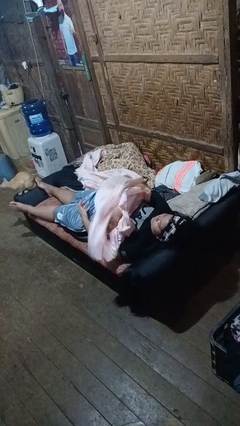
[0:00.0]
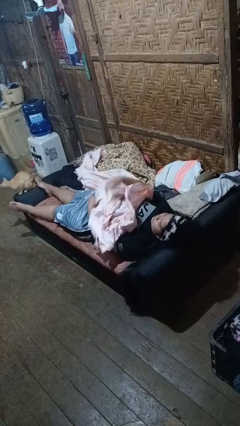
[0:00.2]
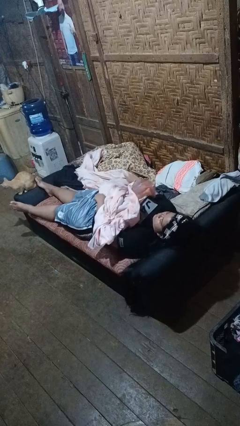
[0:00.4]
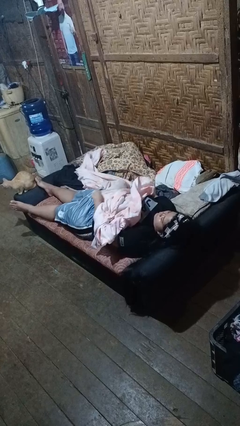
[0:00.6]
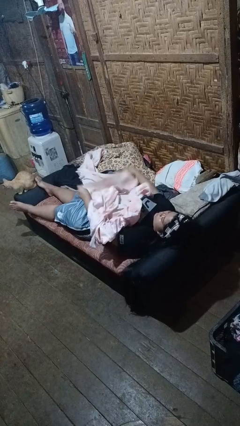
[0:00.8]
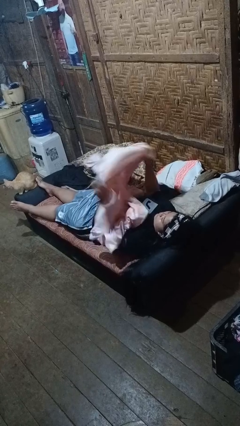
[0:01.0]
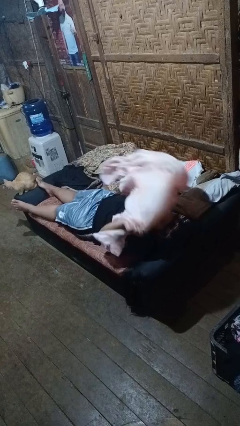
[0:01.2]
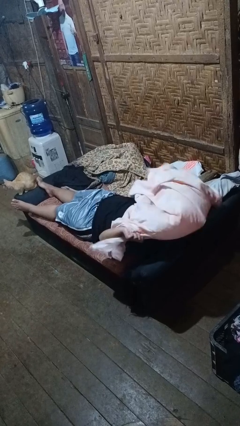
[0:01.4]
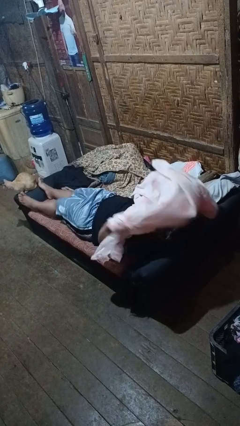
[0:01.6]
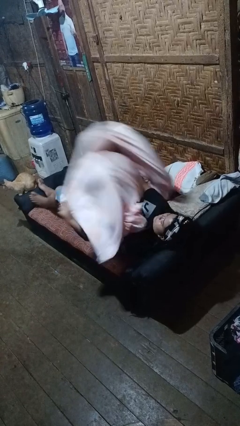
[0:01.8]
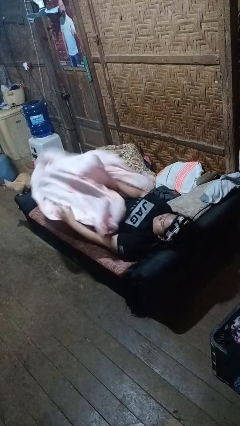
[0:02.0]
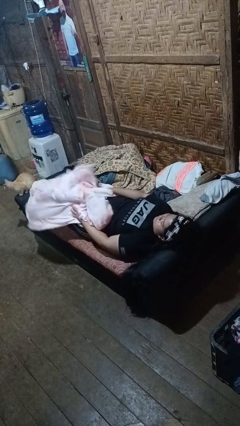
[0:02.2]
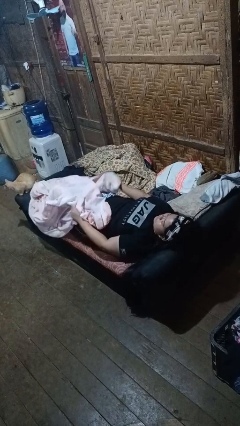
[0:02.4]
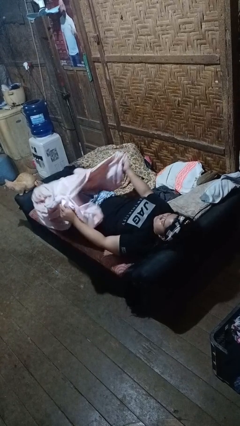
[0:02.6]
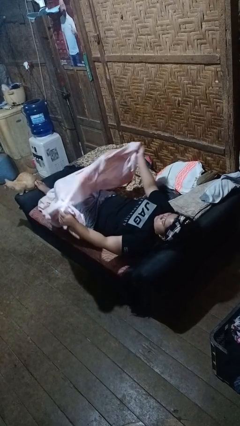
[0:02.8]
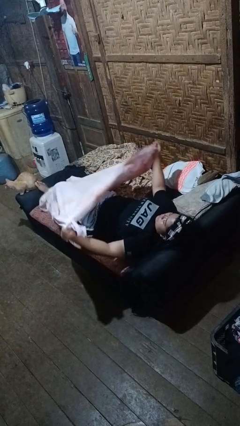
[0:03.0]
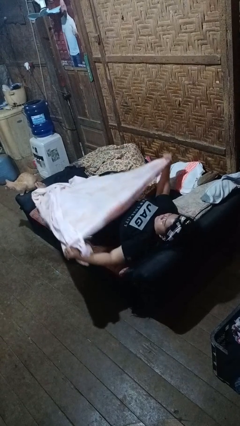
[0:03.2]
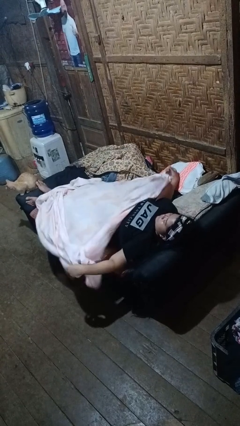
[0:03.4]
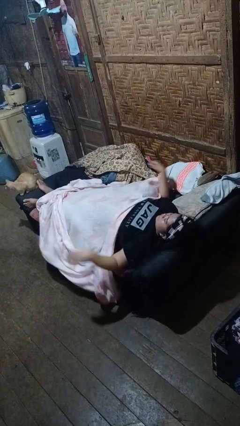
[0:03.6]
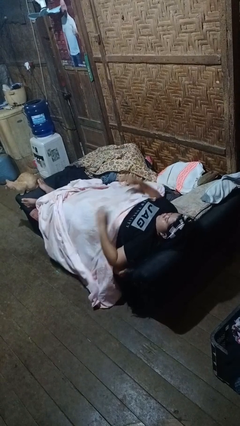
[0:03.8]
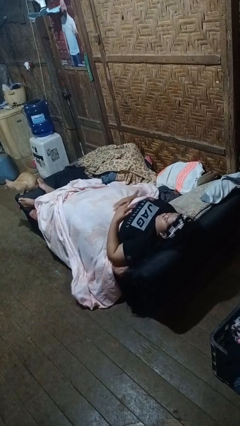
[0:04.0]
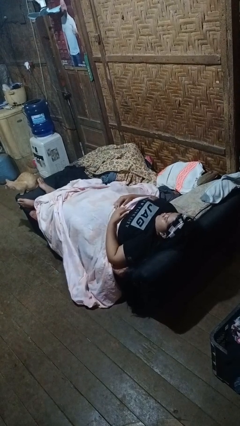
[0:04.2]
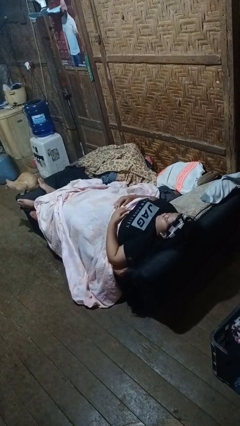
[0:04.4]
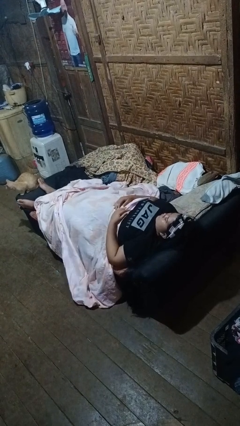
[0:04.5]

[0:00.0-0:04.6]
person covers with bedsheets

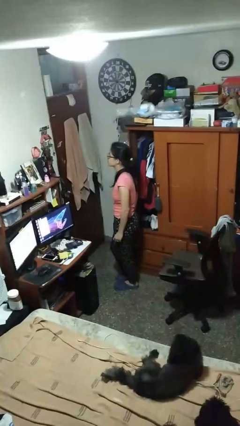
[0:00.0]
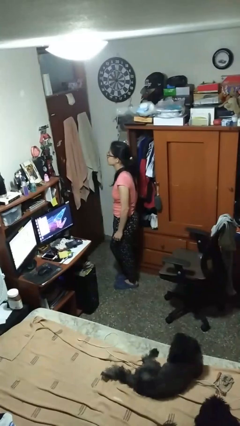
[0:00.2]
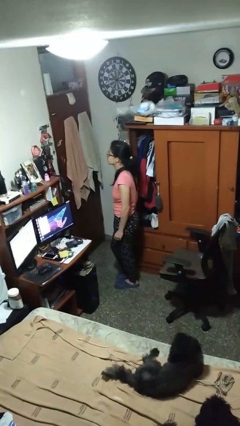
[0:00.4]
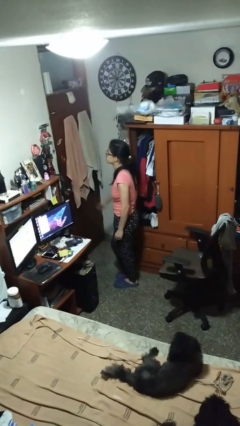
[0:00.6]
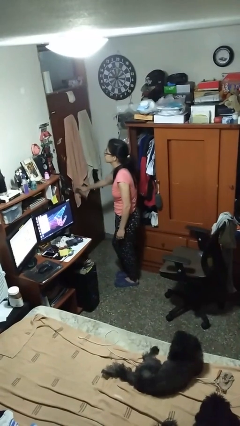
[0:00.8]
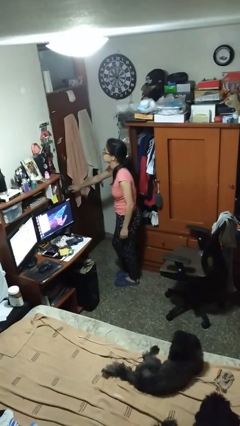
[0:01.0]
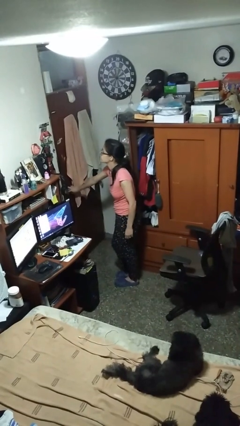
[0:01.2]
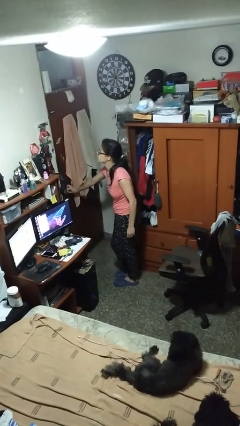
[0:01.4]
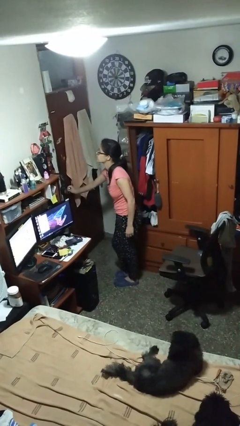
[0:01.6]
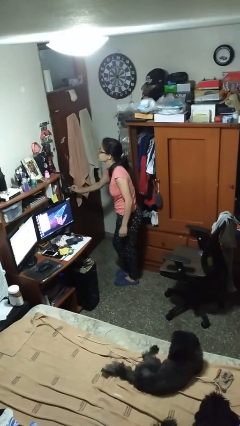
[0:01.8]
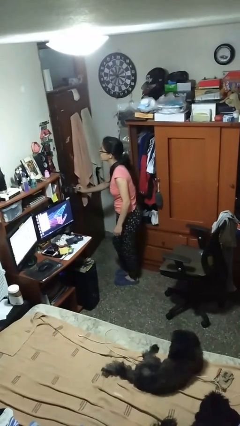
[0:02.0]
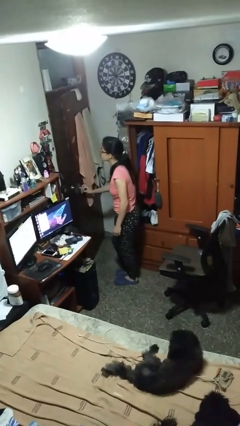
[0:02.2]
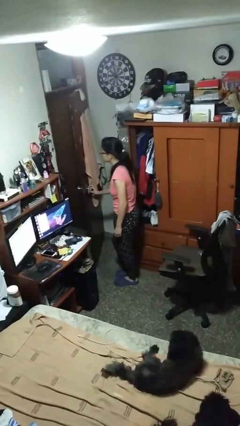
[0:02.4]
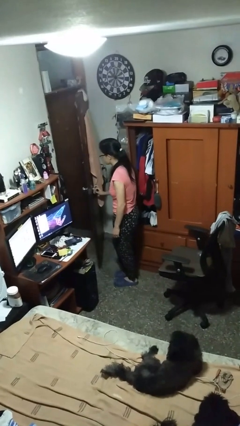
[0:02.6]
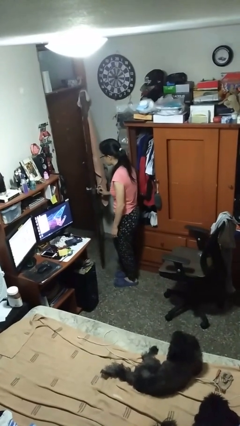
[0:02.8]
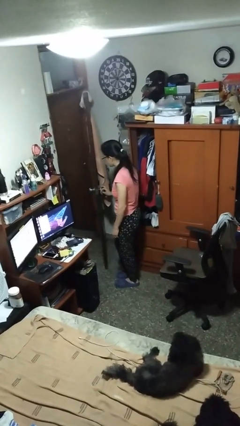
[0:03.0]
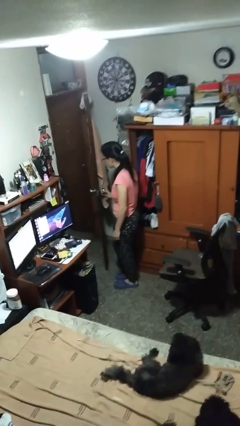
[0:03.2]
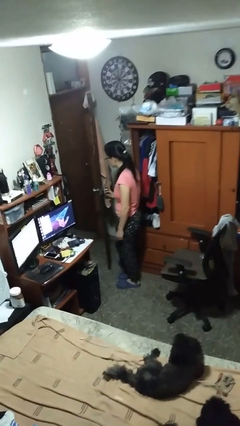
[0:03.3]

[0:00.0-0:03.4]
person opens facility door

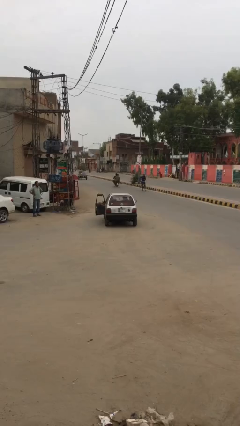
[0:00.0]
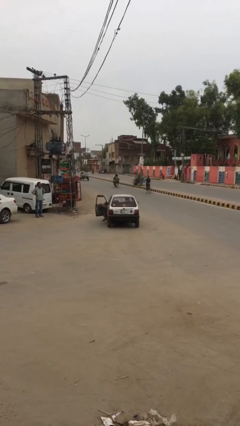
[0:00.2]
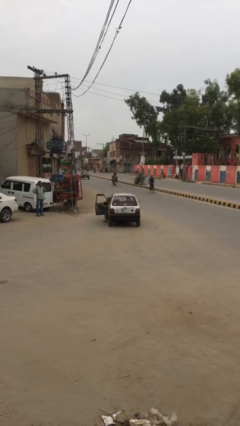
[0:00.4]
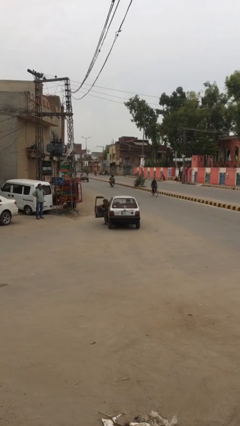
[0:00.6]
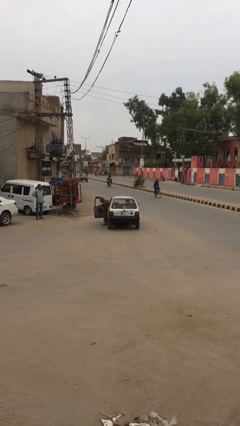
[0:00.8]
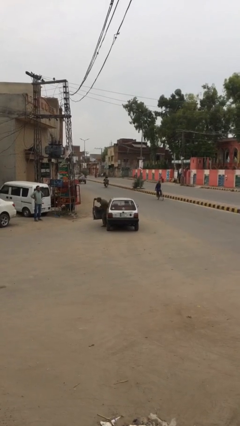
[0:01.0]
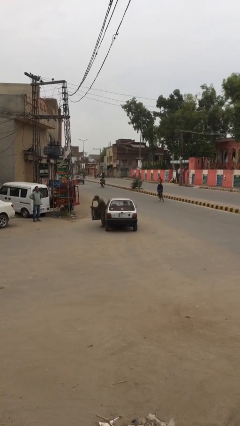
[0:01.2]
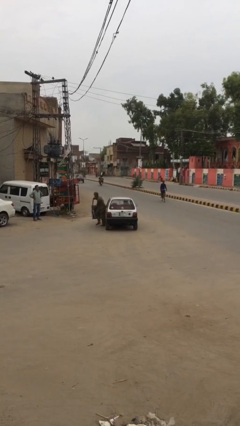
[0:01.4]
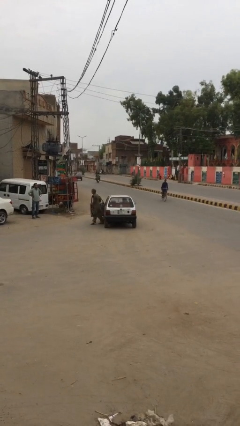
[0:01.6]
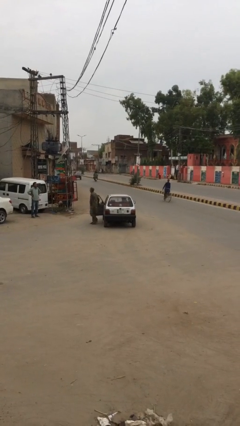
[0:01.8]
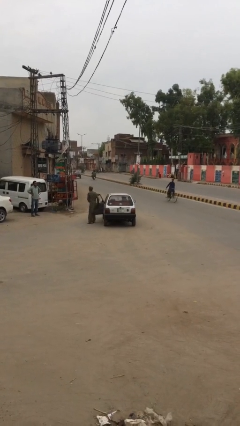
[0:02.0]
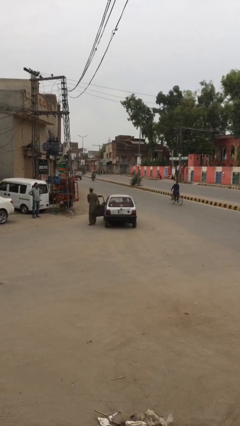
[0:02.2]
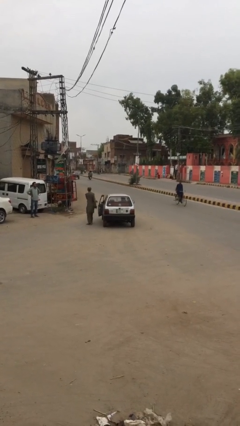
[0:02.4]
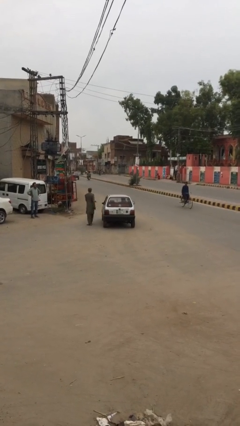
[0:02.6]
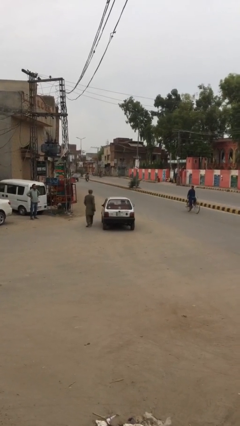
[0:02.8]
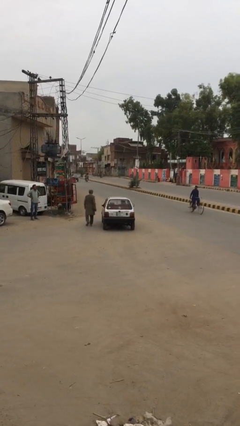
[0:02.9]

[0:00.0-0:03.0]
car drops off person

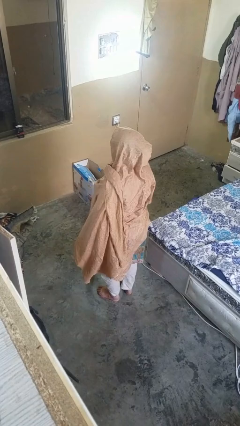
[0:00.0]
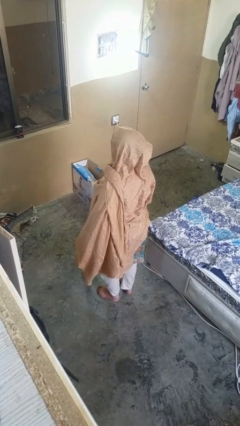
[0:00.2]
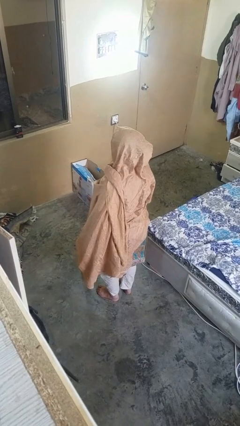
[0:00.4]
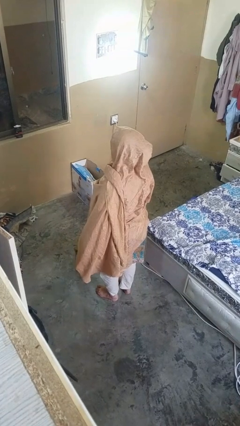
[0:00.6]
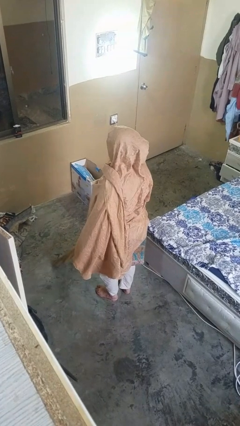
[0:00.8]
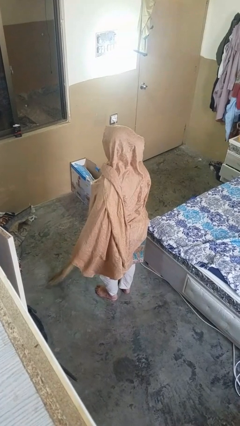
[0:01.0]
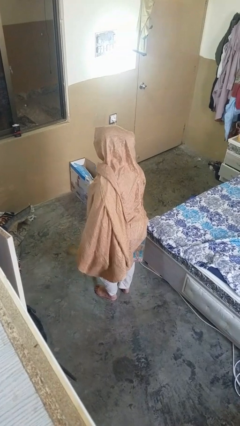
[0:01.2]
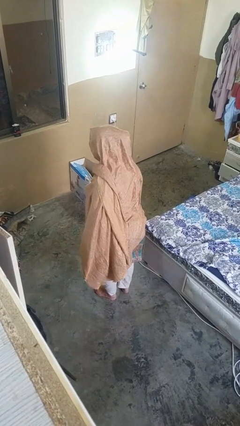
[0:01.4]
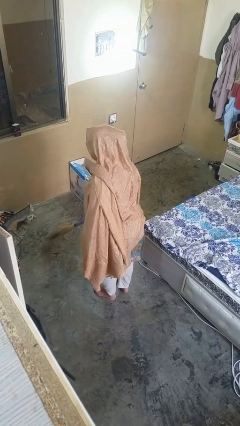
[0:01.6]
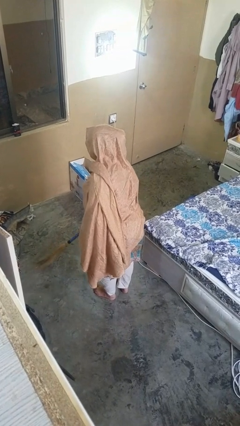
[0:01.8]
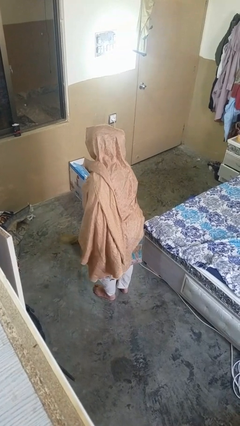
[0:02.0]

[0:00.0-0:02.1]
person sweeps floor

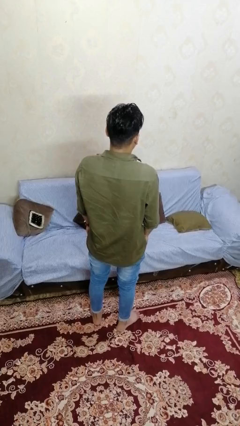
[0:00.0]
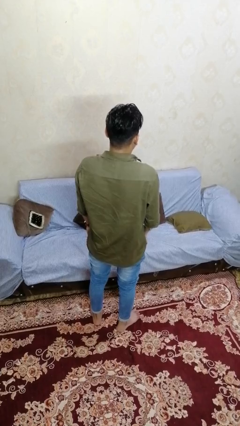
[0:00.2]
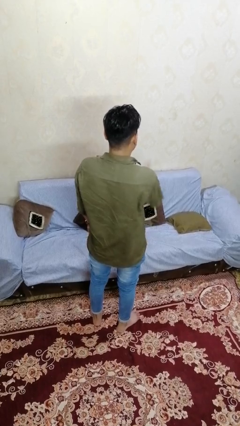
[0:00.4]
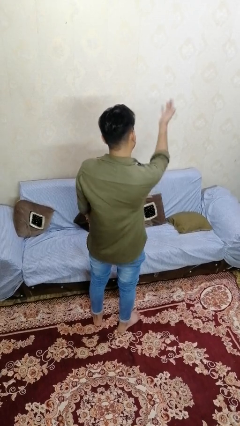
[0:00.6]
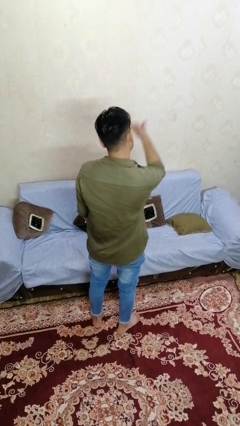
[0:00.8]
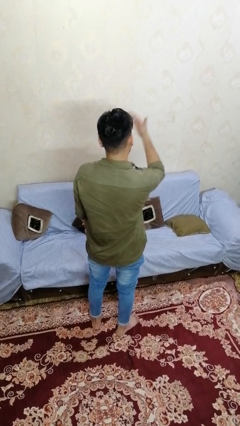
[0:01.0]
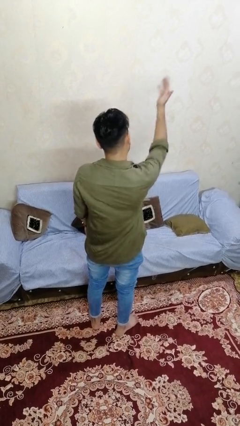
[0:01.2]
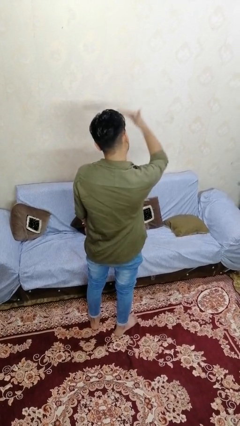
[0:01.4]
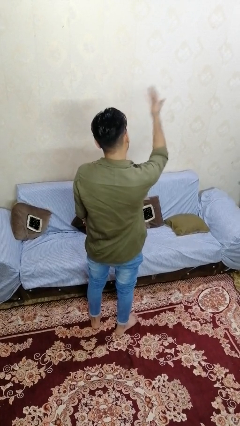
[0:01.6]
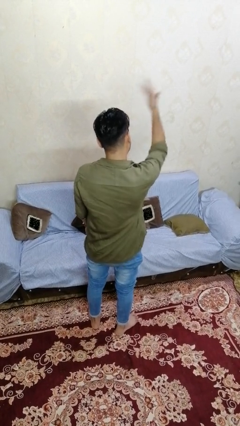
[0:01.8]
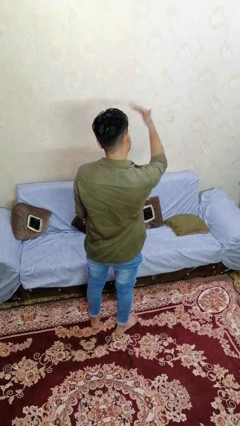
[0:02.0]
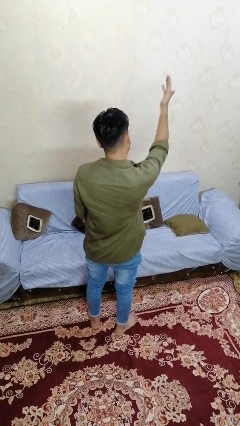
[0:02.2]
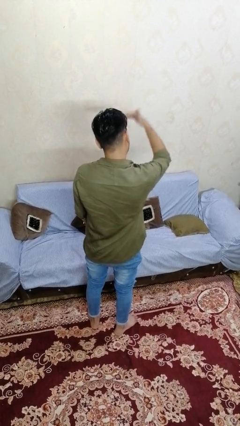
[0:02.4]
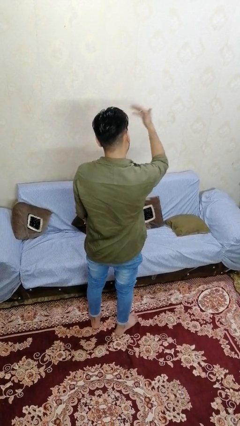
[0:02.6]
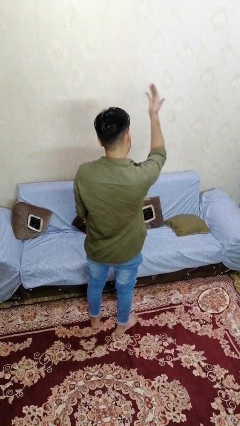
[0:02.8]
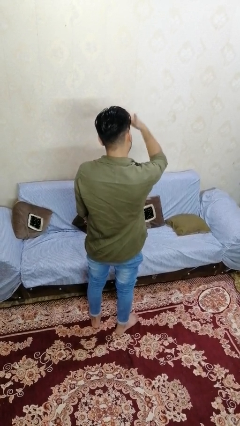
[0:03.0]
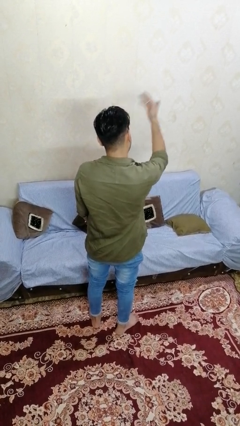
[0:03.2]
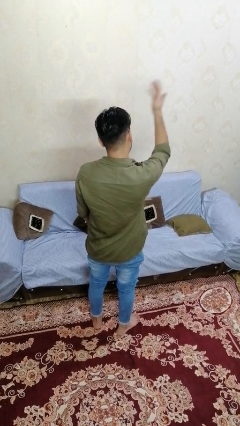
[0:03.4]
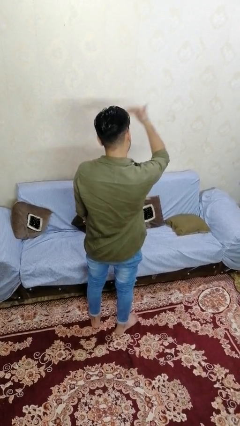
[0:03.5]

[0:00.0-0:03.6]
person gestures come here

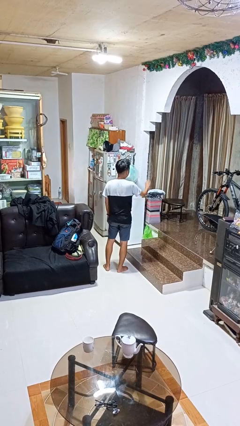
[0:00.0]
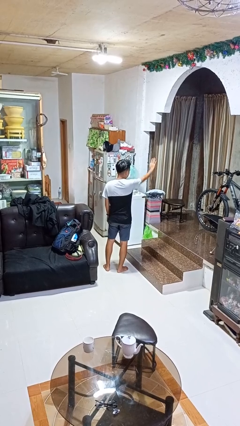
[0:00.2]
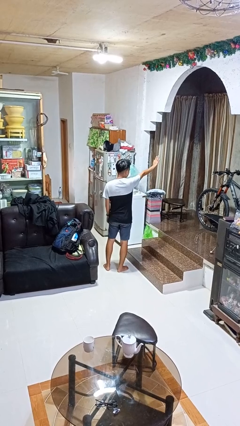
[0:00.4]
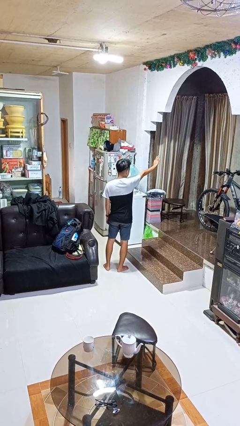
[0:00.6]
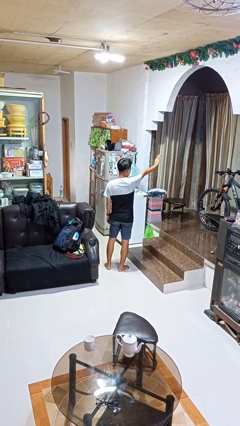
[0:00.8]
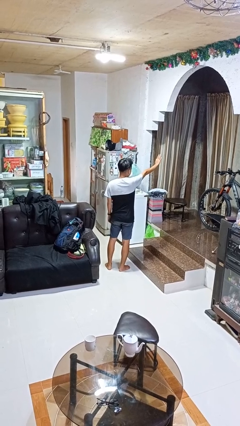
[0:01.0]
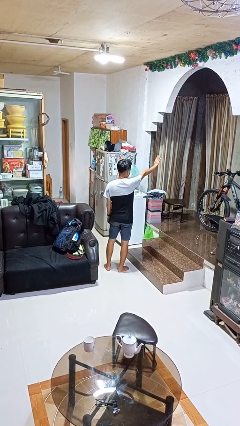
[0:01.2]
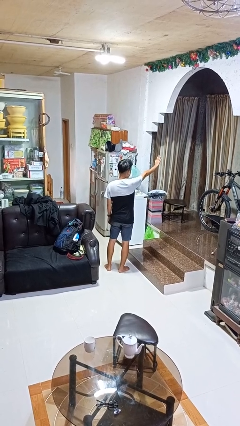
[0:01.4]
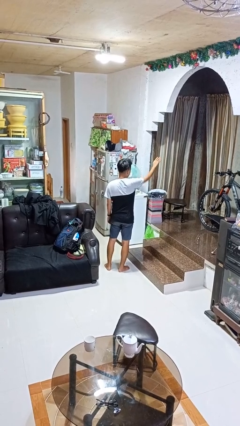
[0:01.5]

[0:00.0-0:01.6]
person gestures stop
